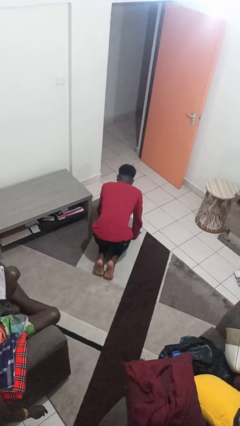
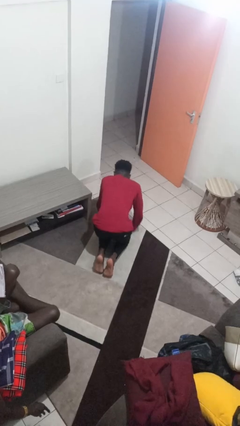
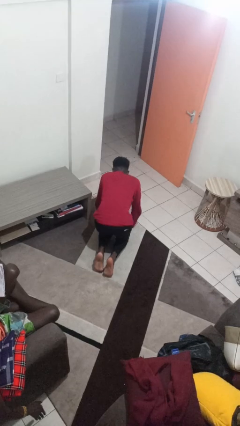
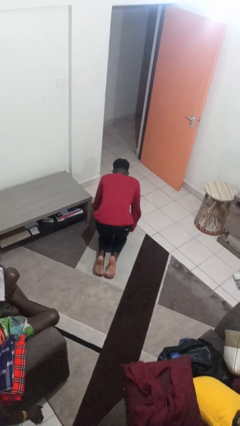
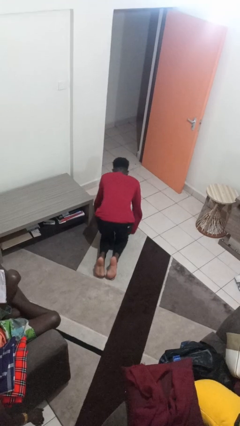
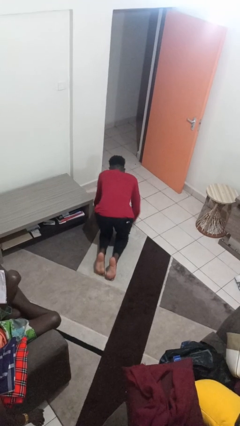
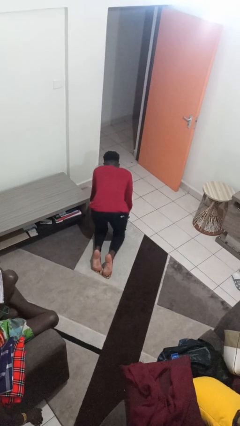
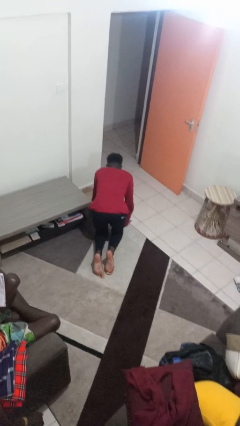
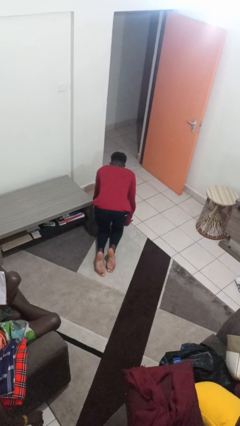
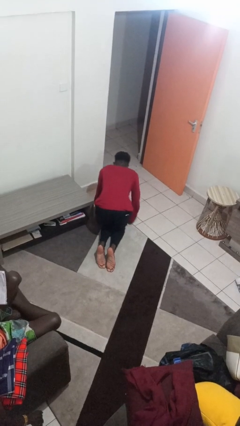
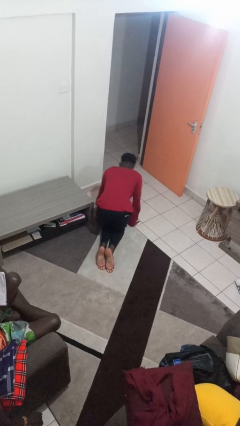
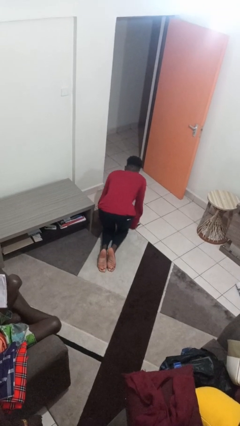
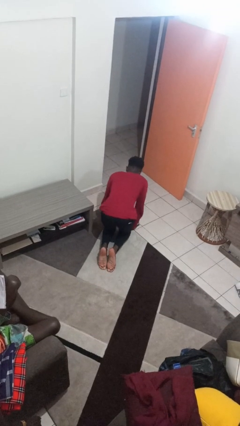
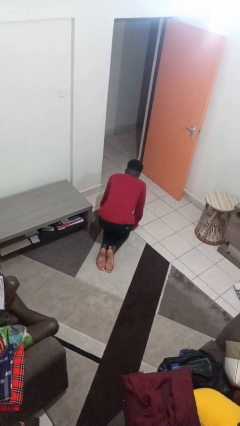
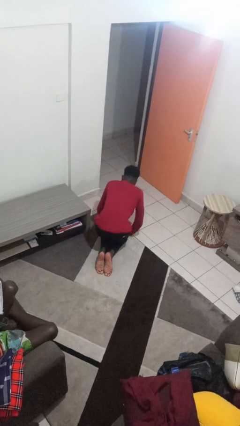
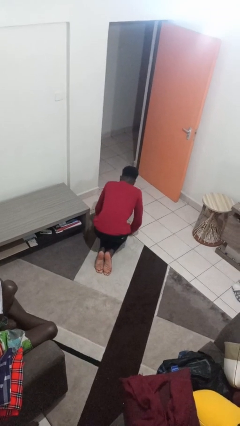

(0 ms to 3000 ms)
person crawls

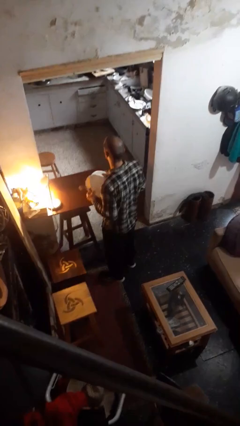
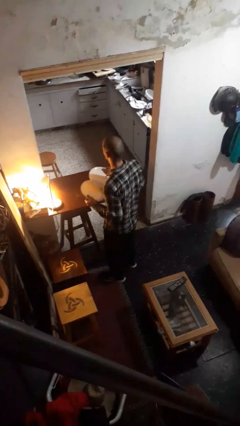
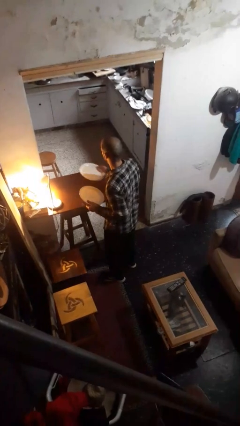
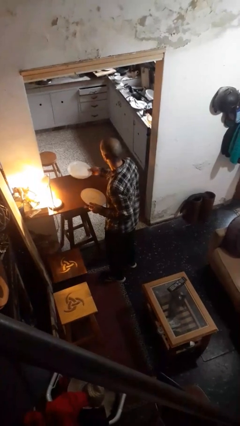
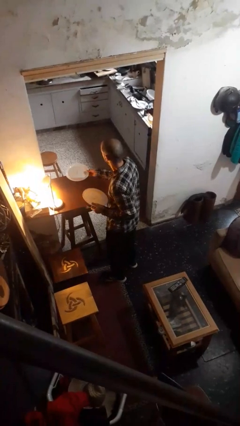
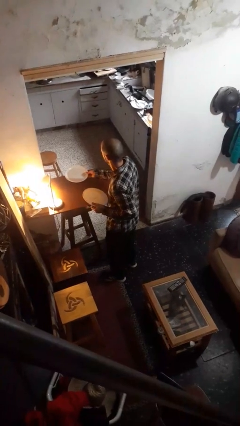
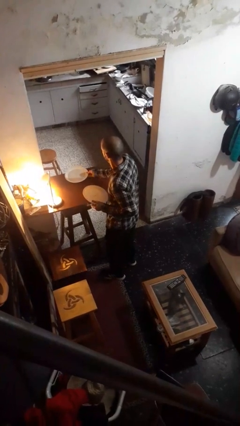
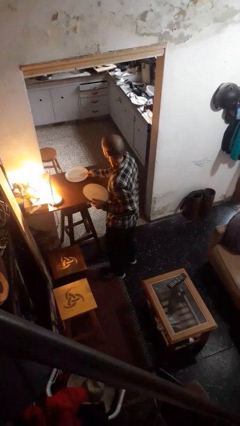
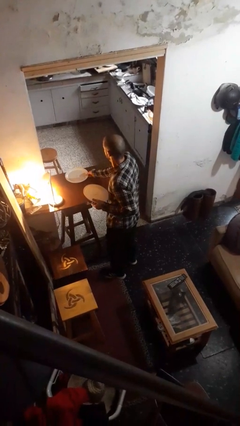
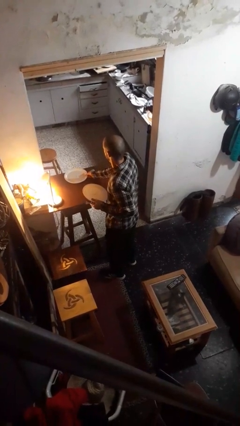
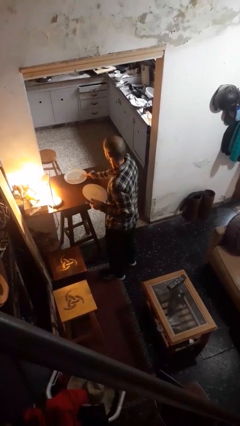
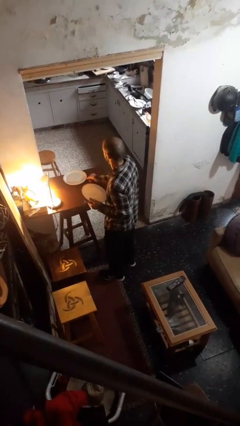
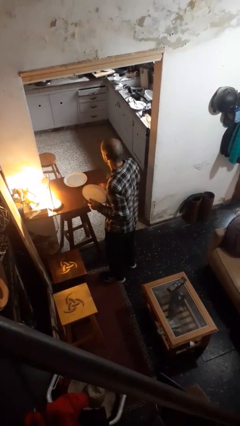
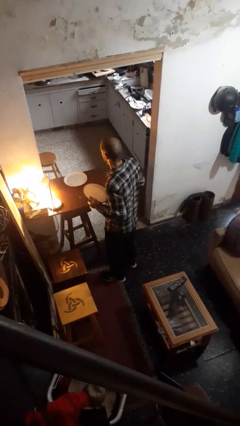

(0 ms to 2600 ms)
person sets table

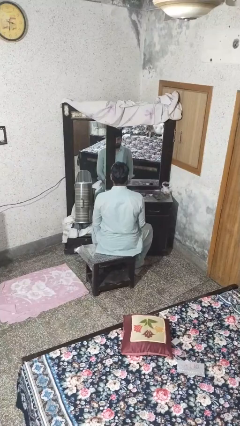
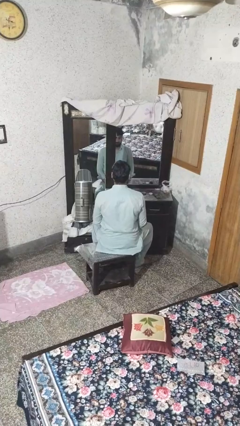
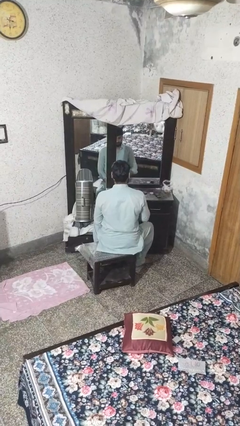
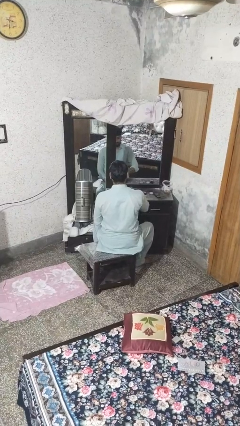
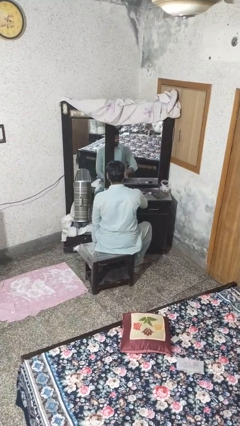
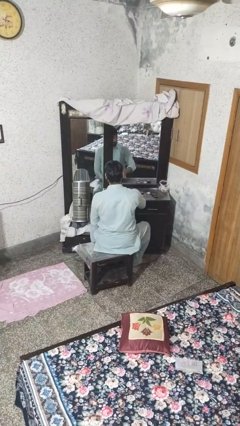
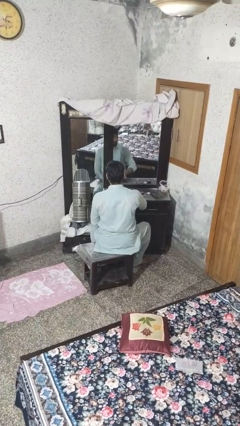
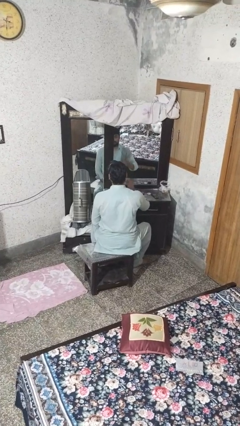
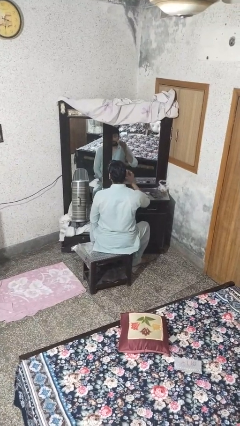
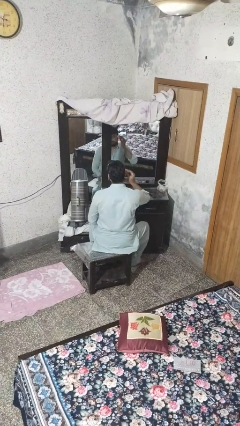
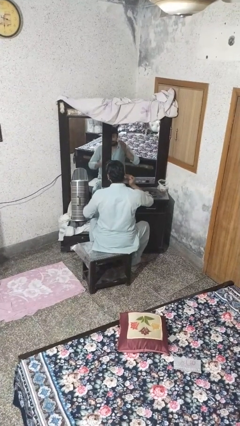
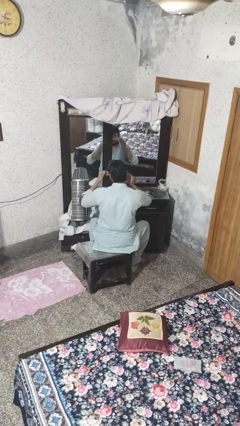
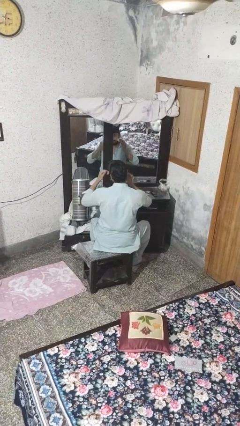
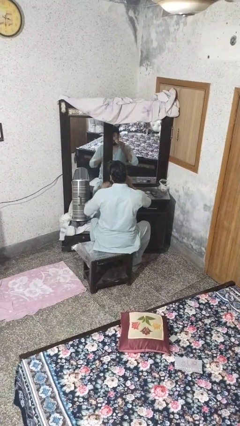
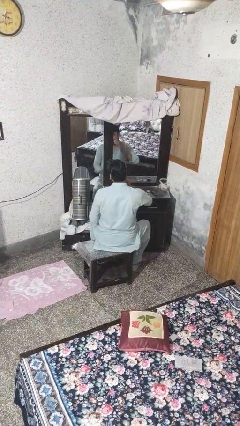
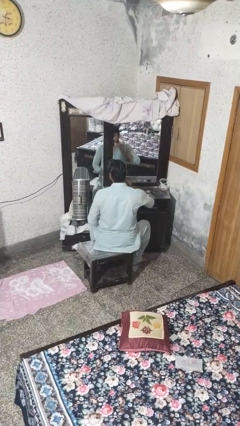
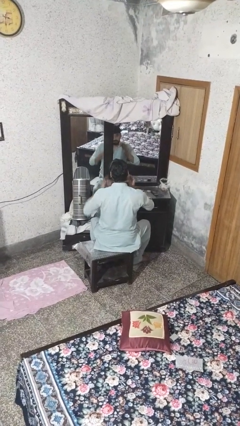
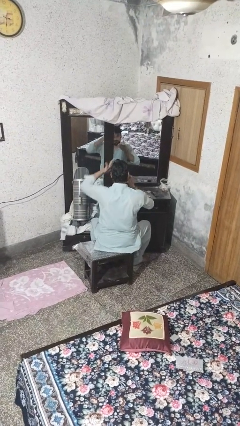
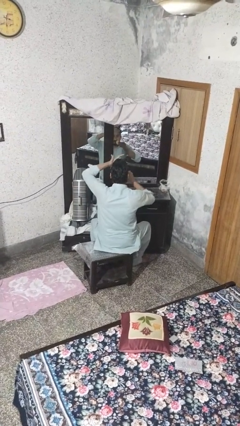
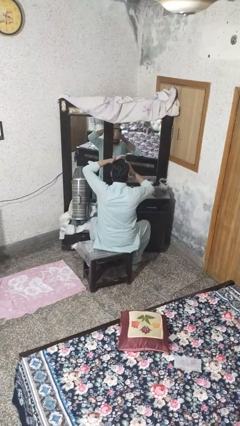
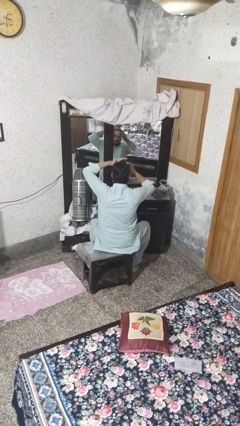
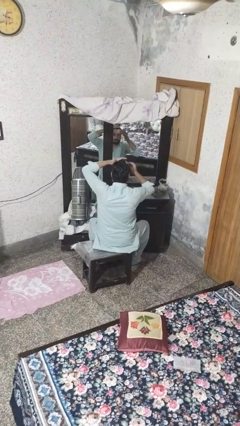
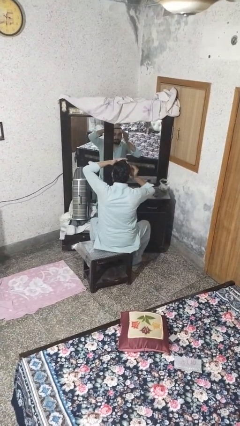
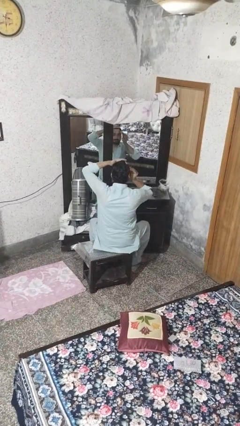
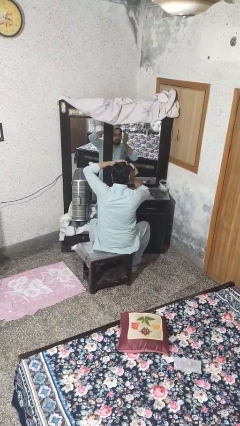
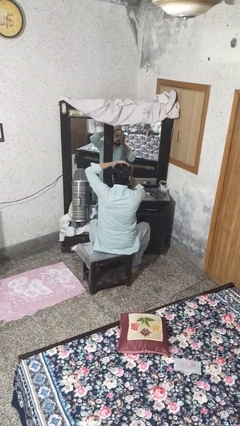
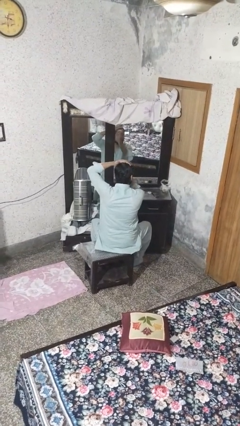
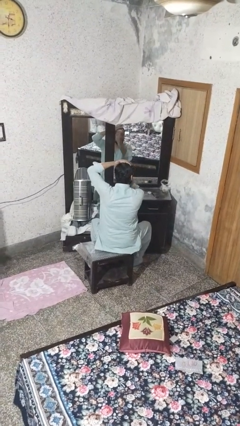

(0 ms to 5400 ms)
person applies foundation makeup

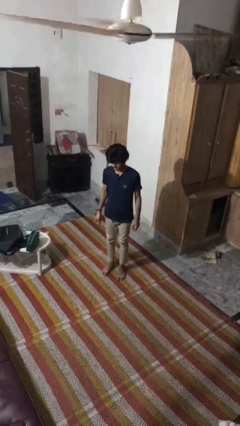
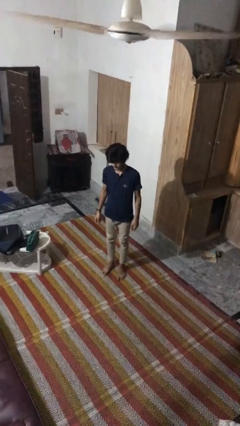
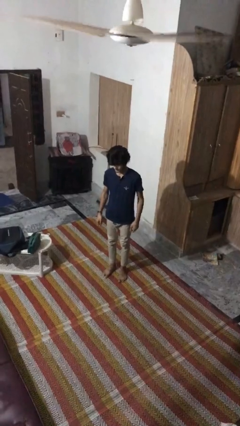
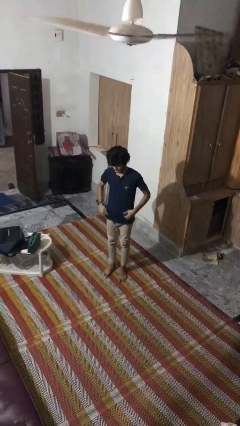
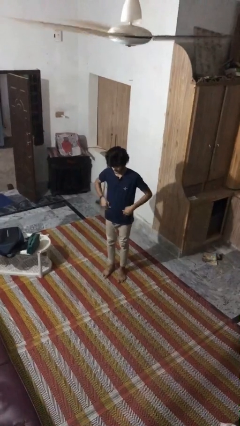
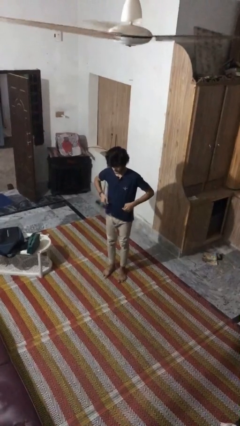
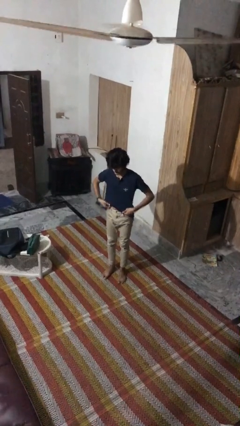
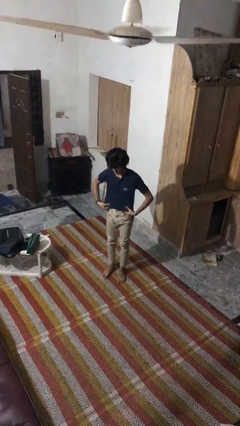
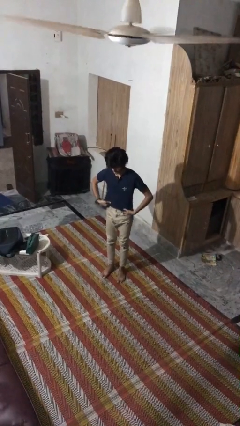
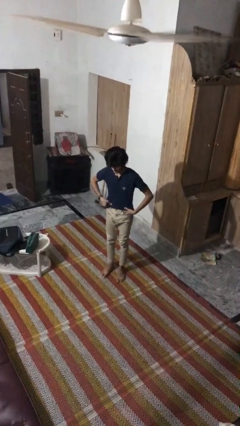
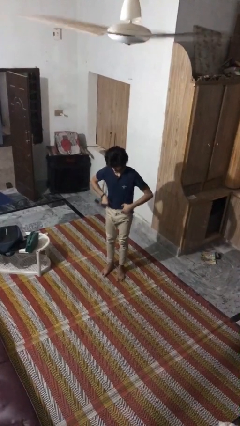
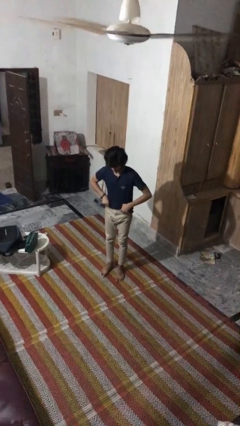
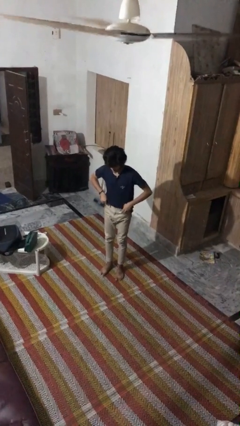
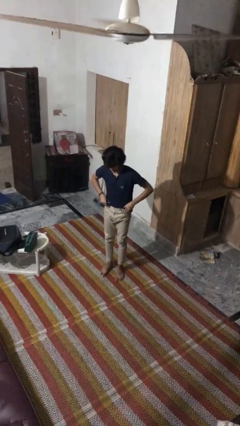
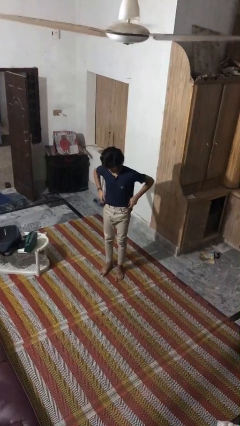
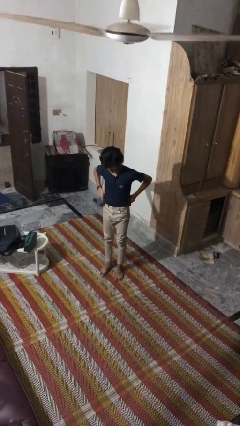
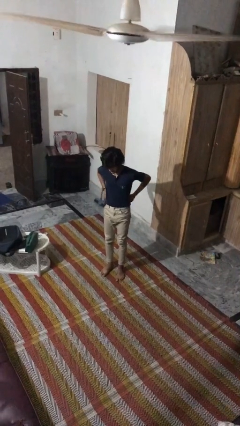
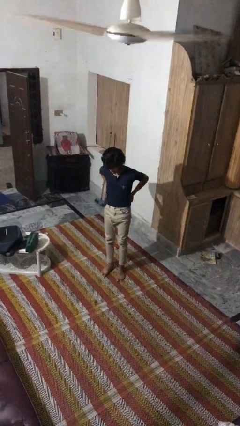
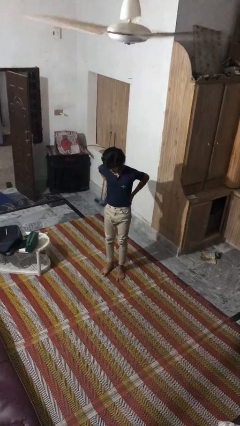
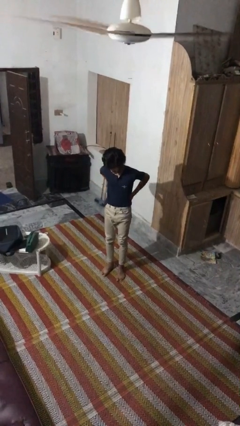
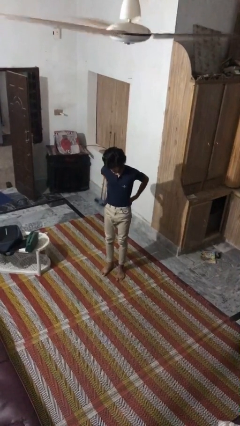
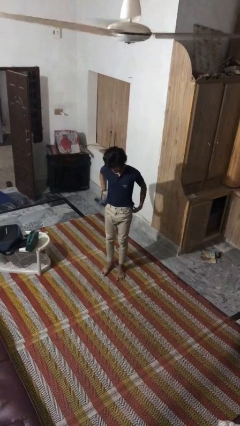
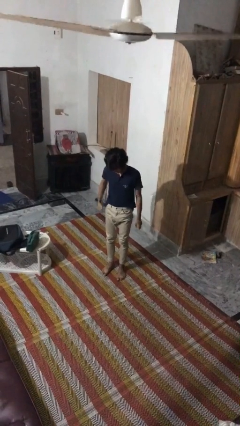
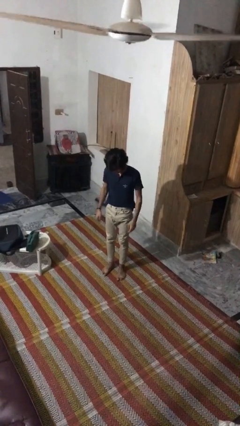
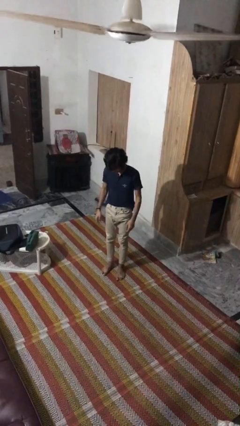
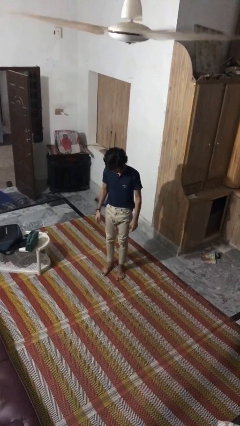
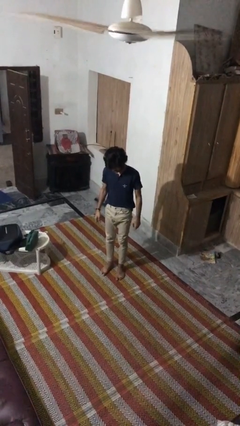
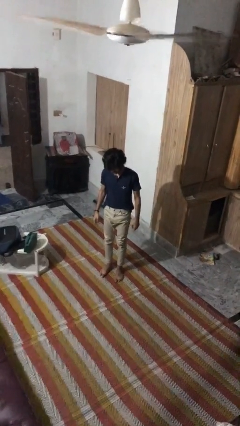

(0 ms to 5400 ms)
person tucks in shirt

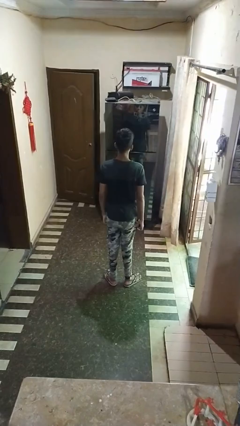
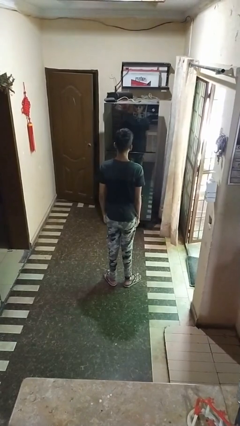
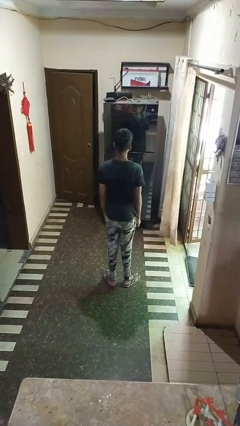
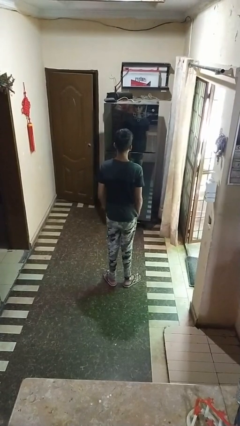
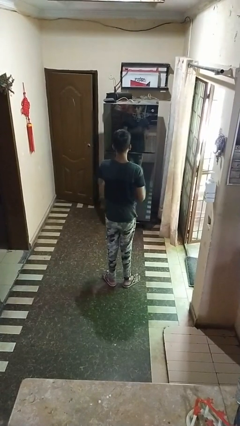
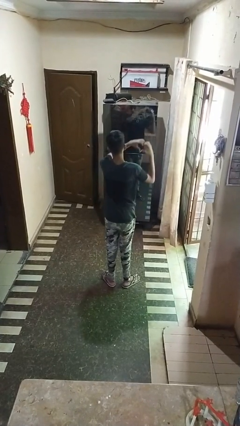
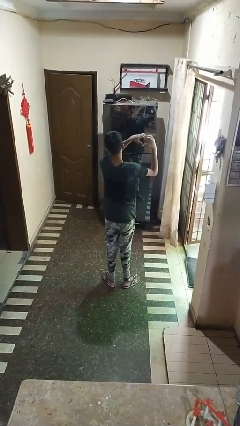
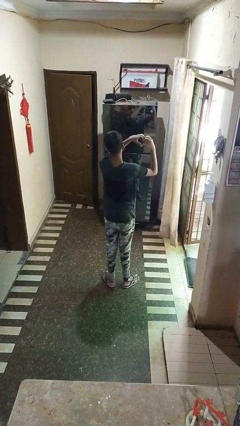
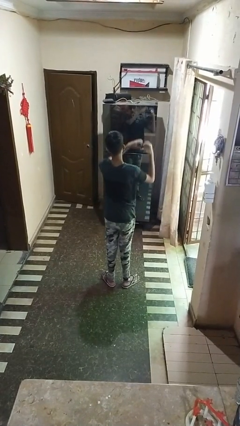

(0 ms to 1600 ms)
person gestures heart
